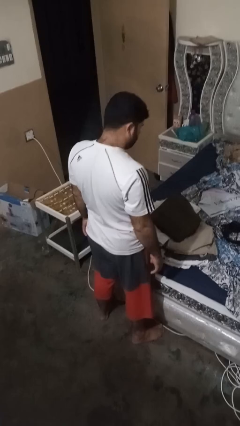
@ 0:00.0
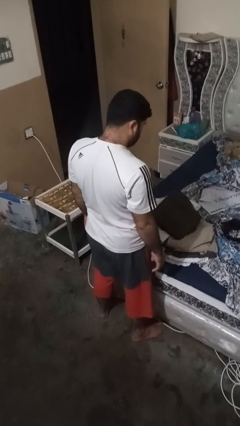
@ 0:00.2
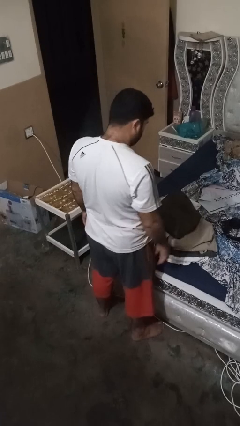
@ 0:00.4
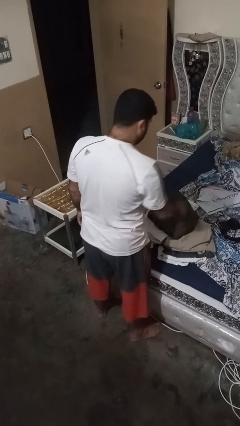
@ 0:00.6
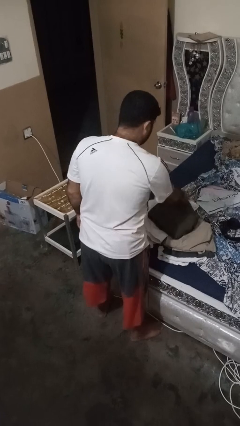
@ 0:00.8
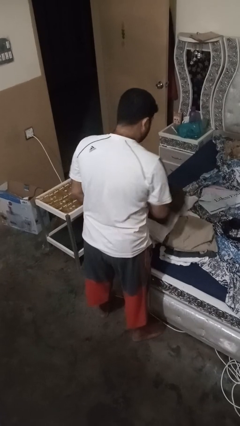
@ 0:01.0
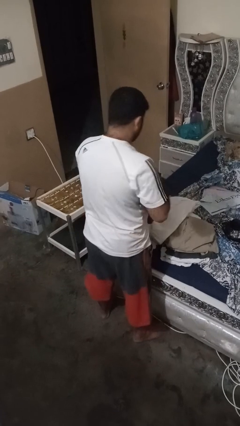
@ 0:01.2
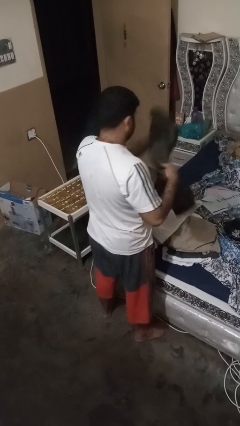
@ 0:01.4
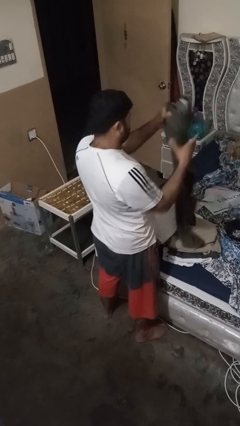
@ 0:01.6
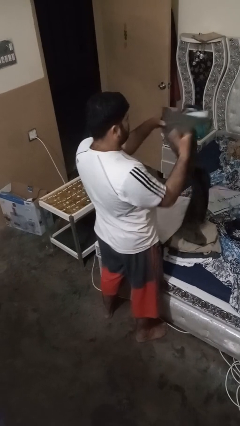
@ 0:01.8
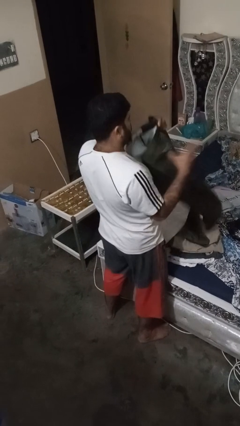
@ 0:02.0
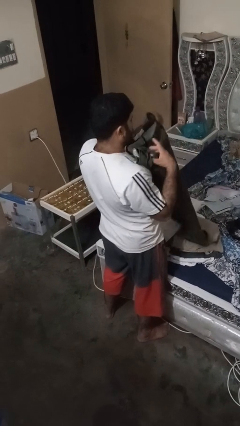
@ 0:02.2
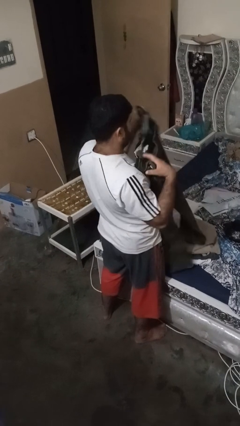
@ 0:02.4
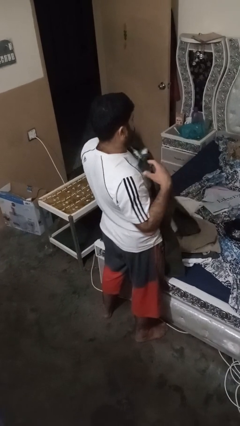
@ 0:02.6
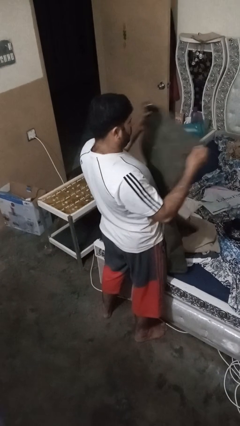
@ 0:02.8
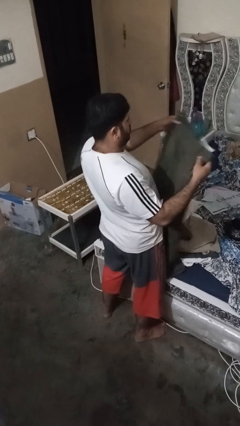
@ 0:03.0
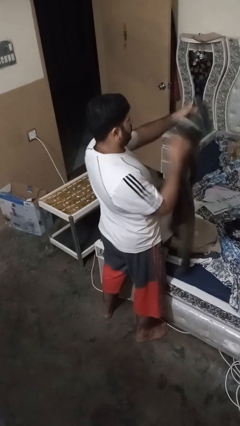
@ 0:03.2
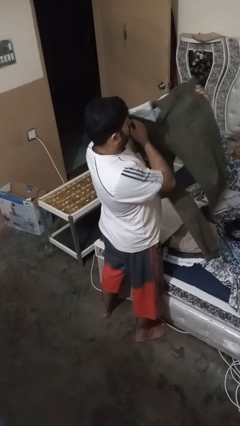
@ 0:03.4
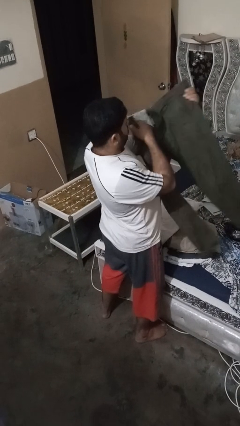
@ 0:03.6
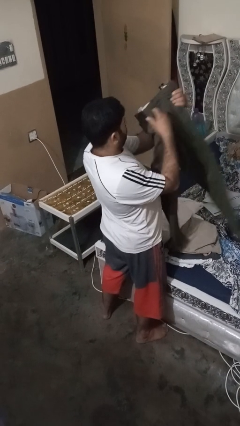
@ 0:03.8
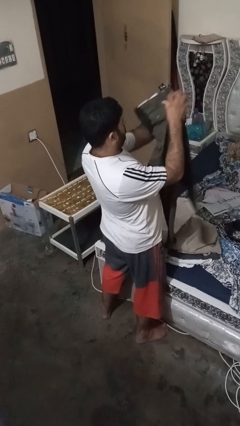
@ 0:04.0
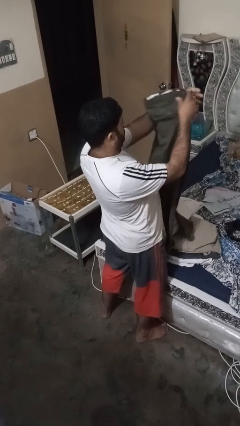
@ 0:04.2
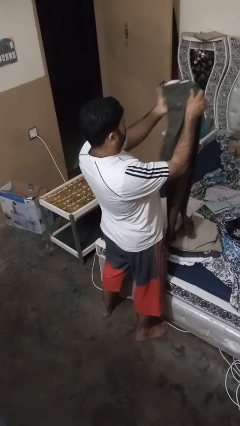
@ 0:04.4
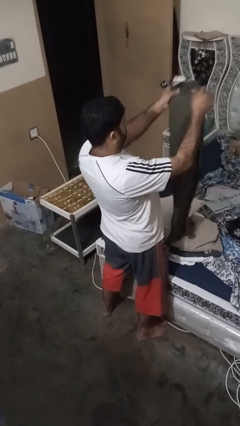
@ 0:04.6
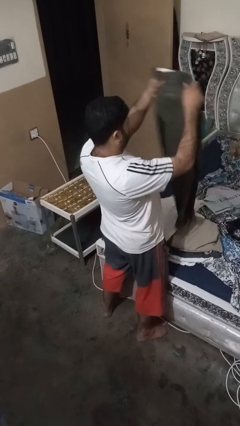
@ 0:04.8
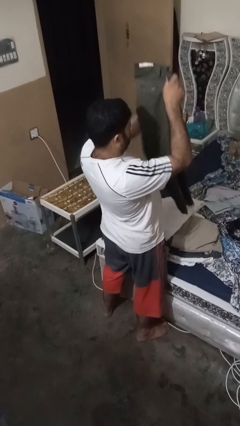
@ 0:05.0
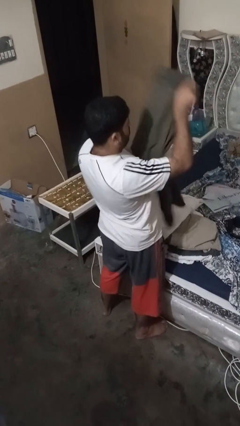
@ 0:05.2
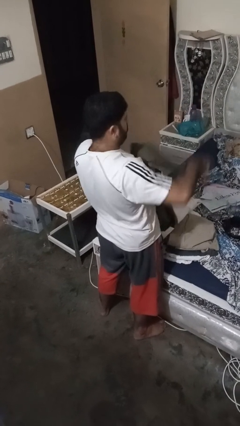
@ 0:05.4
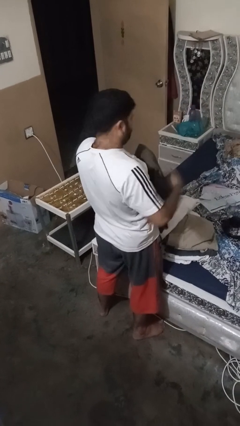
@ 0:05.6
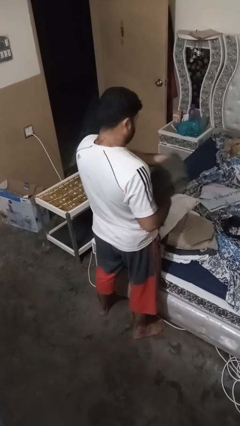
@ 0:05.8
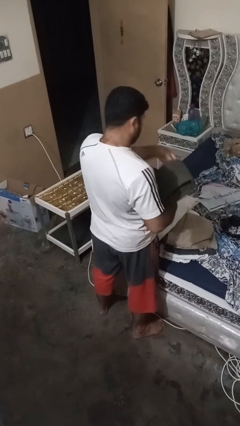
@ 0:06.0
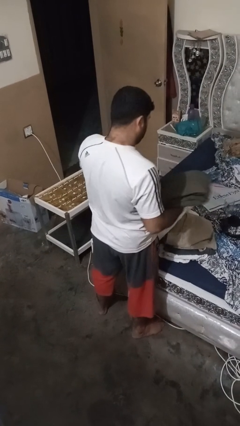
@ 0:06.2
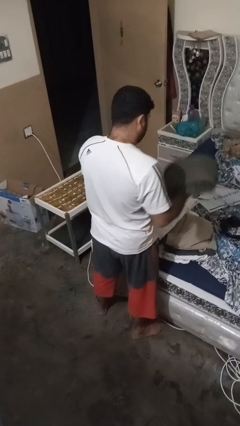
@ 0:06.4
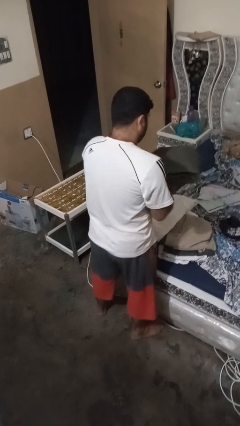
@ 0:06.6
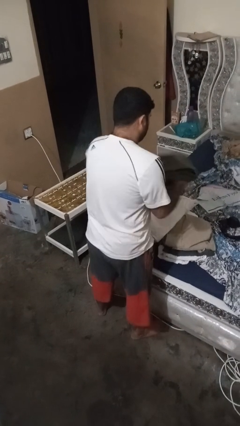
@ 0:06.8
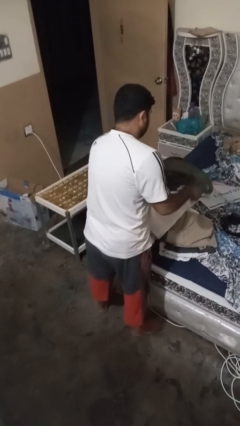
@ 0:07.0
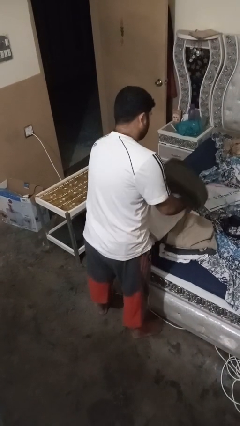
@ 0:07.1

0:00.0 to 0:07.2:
person folds pants

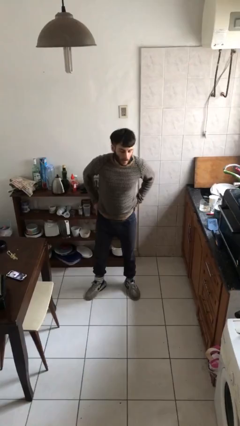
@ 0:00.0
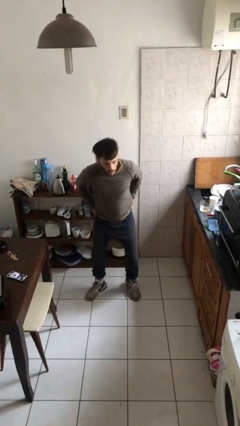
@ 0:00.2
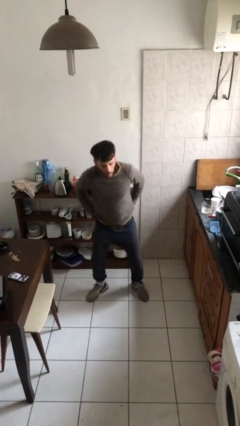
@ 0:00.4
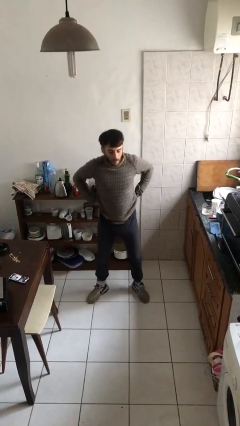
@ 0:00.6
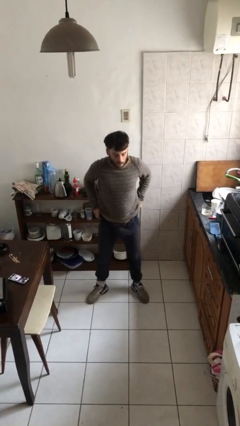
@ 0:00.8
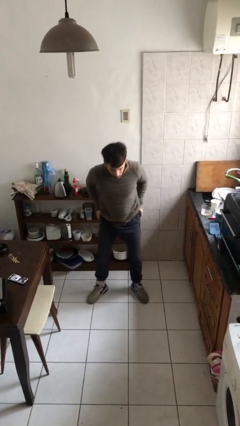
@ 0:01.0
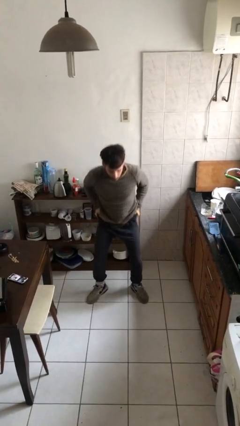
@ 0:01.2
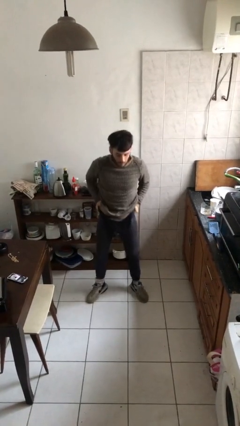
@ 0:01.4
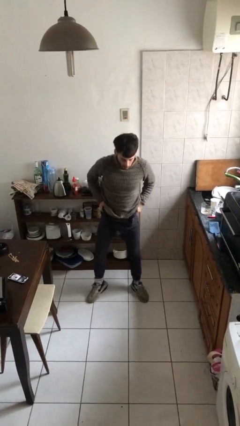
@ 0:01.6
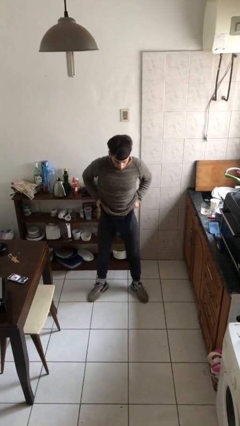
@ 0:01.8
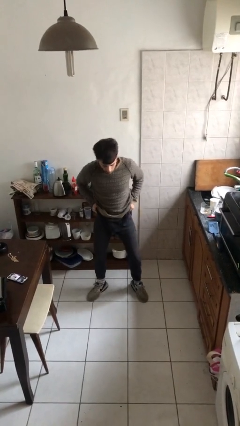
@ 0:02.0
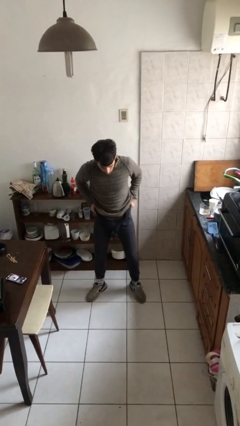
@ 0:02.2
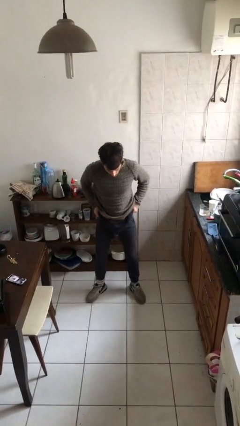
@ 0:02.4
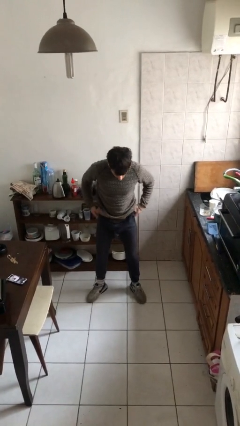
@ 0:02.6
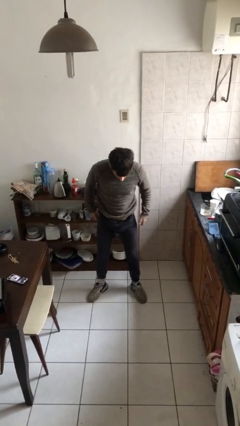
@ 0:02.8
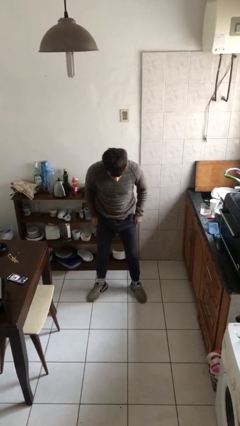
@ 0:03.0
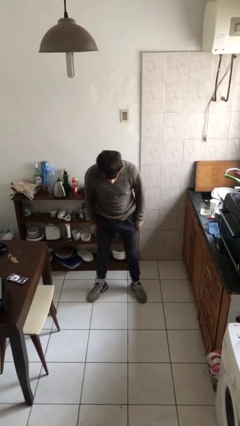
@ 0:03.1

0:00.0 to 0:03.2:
person hikes up pants

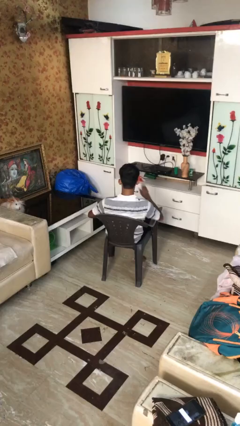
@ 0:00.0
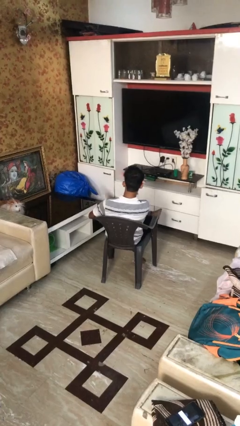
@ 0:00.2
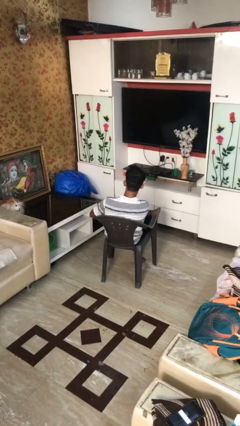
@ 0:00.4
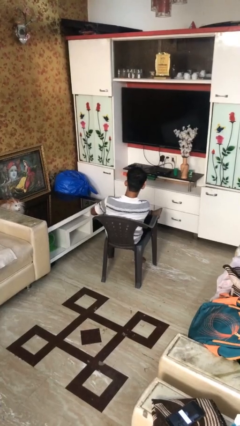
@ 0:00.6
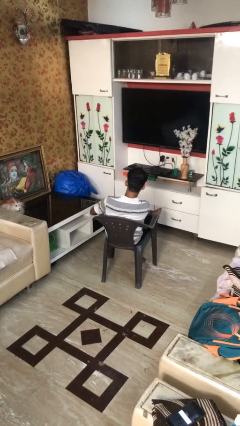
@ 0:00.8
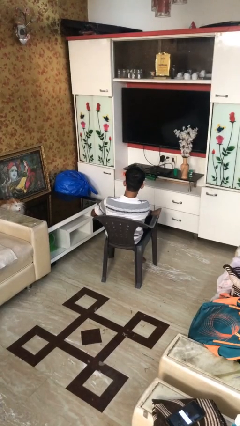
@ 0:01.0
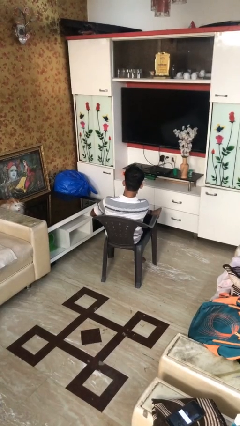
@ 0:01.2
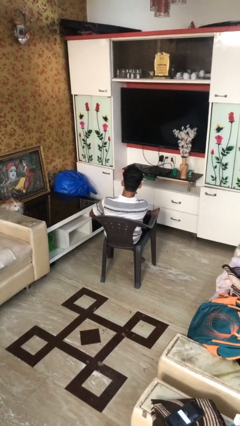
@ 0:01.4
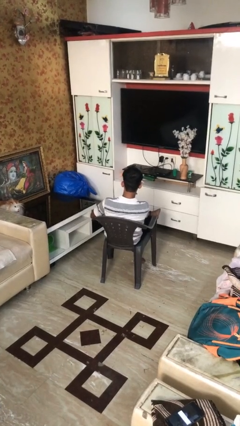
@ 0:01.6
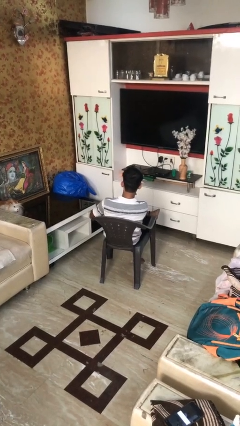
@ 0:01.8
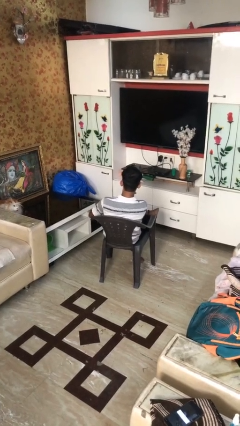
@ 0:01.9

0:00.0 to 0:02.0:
person swats bug

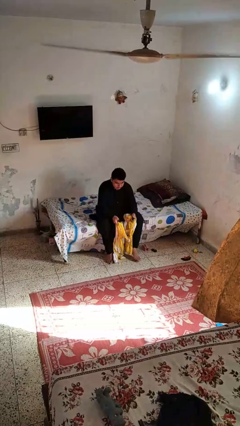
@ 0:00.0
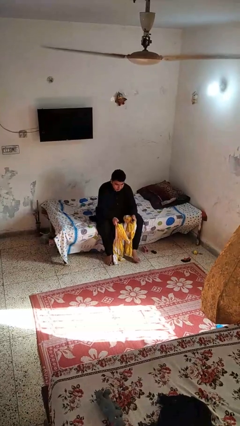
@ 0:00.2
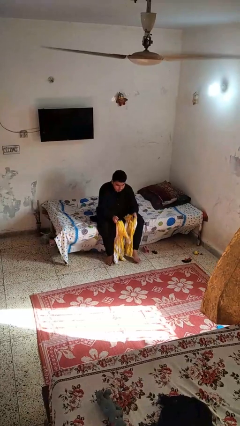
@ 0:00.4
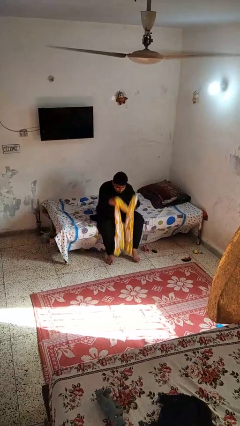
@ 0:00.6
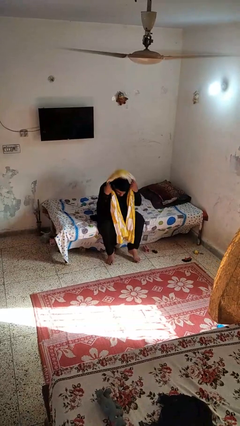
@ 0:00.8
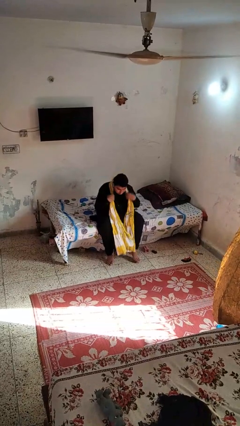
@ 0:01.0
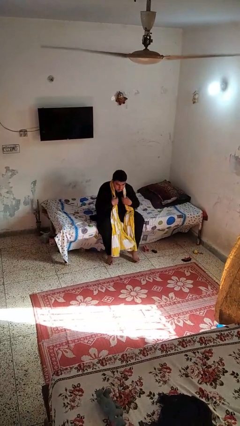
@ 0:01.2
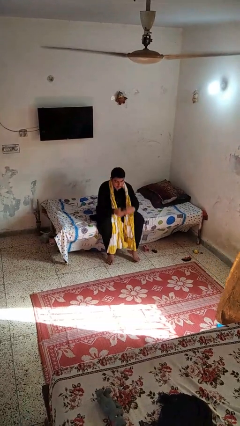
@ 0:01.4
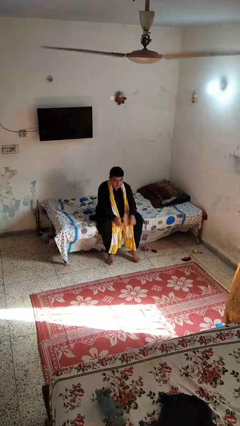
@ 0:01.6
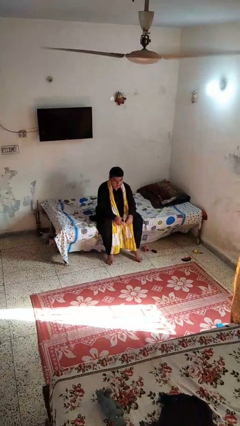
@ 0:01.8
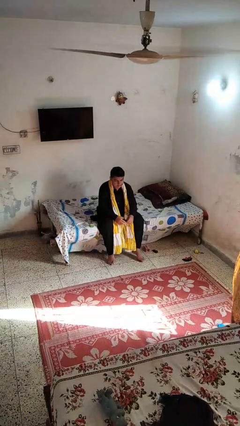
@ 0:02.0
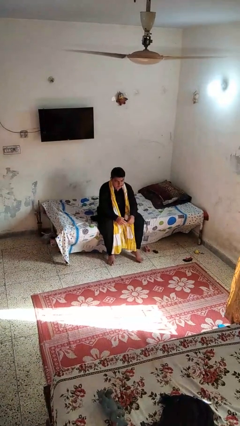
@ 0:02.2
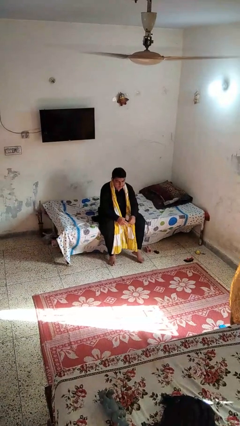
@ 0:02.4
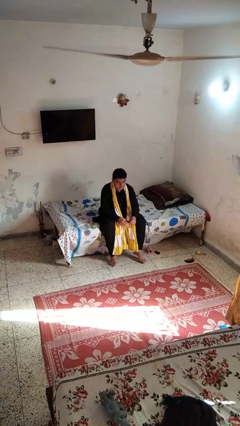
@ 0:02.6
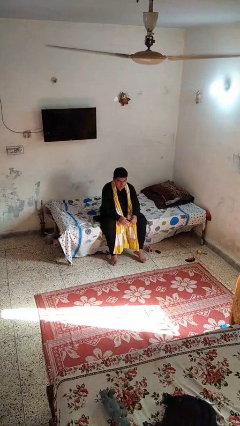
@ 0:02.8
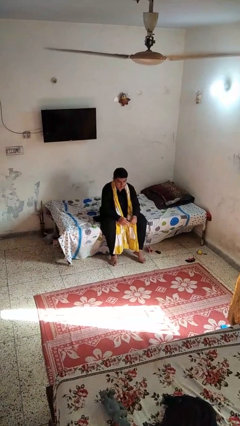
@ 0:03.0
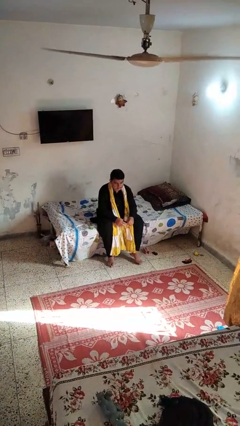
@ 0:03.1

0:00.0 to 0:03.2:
person puts on scarf

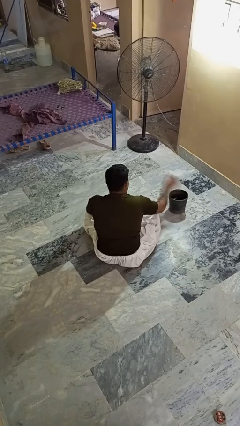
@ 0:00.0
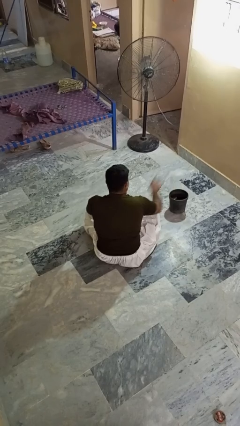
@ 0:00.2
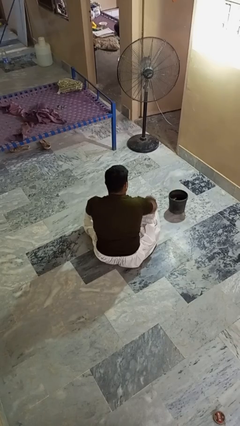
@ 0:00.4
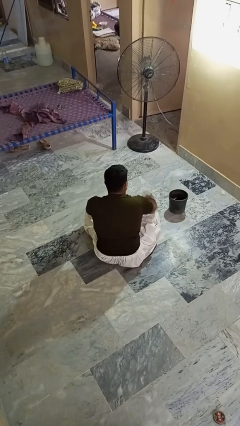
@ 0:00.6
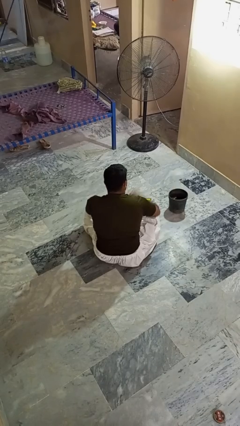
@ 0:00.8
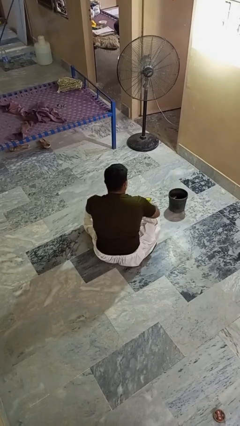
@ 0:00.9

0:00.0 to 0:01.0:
person takes object from basket

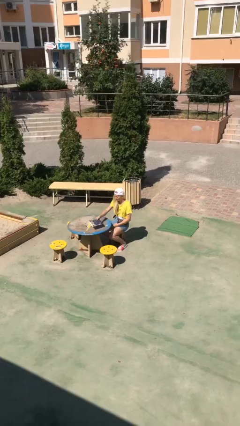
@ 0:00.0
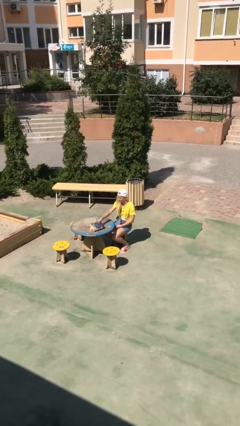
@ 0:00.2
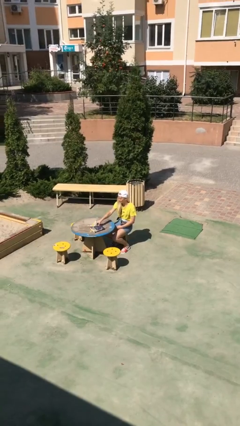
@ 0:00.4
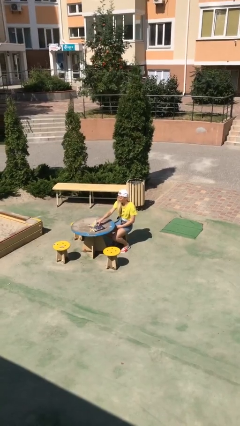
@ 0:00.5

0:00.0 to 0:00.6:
person puts down object on table

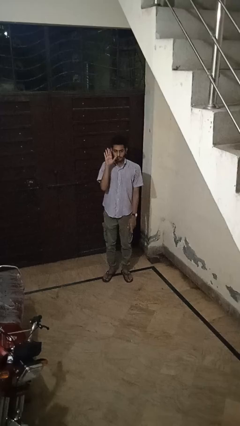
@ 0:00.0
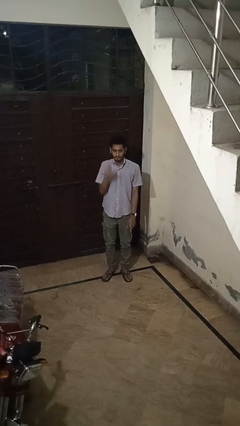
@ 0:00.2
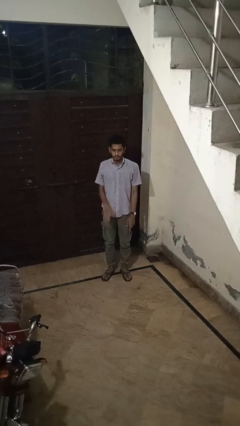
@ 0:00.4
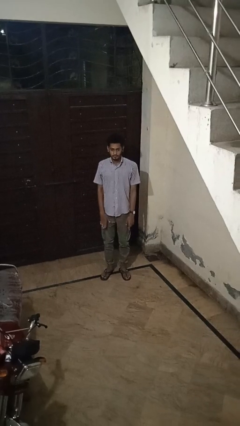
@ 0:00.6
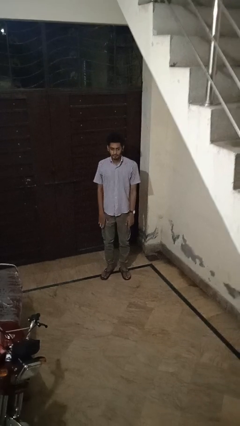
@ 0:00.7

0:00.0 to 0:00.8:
person gestures lower hand
